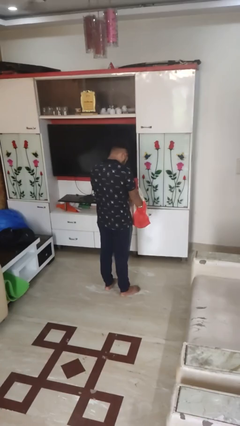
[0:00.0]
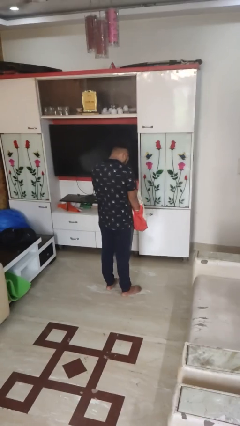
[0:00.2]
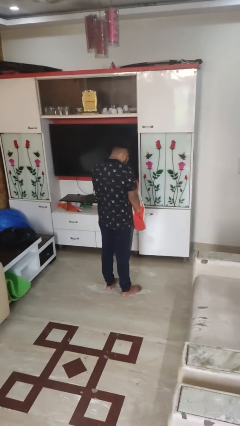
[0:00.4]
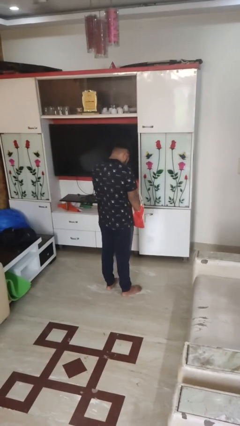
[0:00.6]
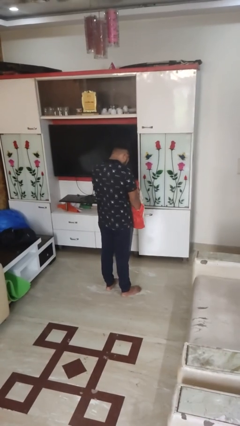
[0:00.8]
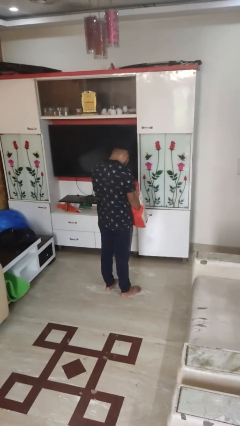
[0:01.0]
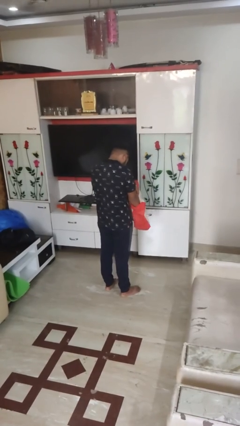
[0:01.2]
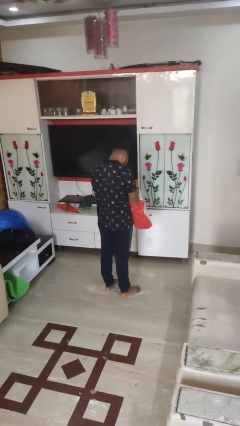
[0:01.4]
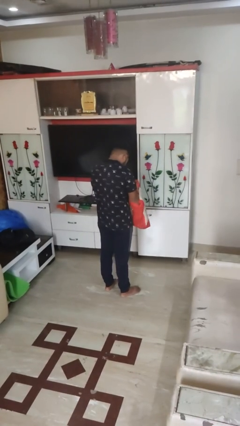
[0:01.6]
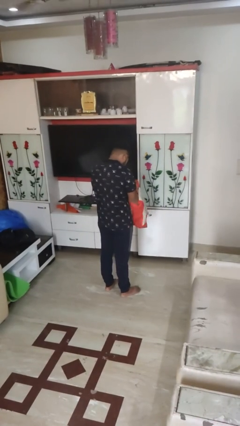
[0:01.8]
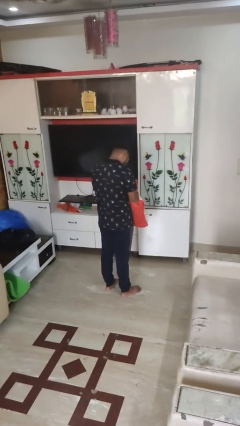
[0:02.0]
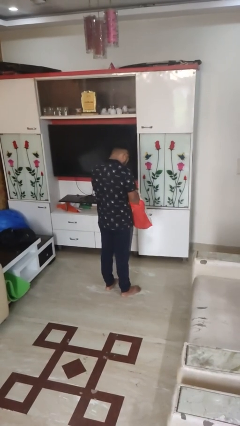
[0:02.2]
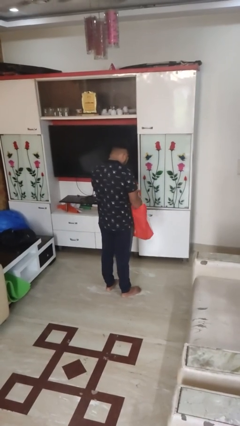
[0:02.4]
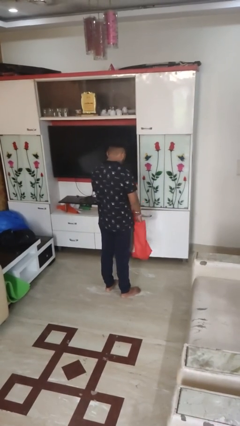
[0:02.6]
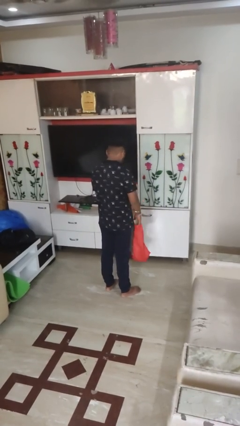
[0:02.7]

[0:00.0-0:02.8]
person searches in bag

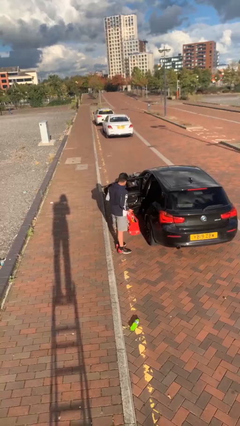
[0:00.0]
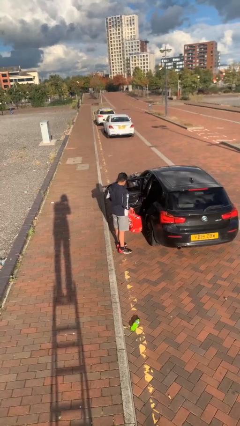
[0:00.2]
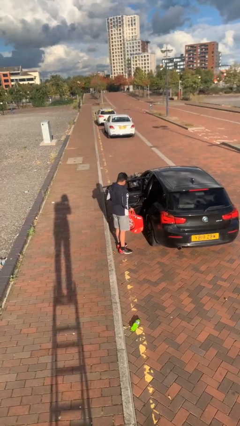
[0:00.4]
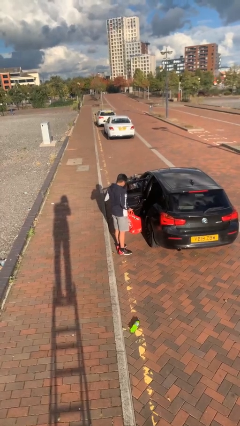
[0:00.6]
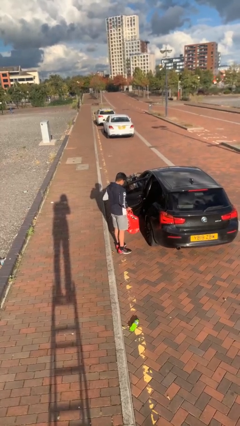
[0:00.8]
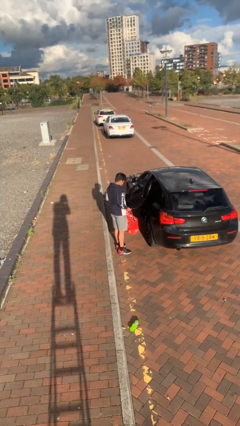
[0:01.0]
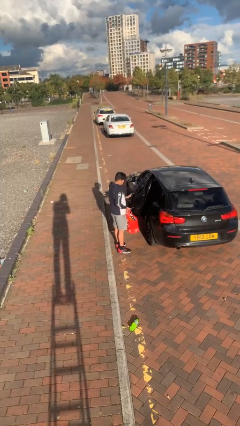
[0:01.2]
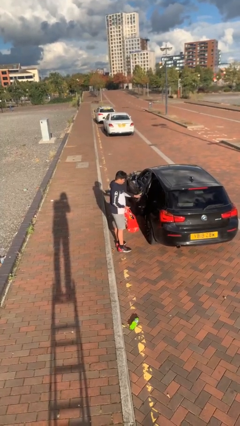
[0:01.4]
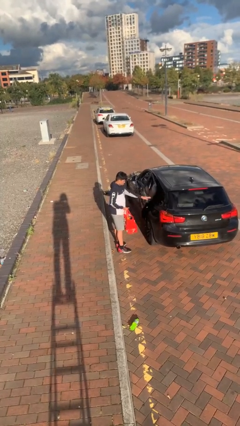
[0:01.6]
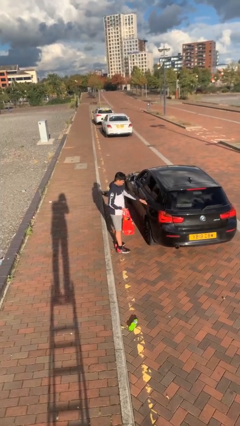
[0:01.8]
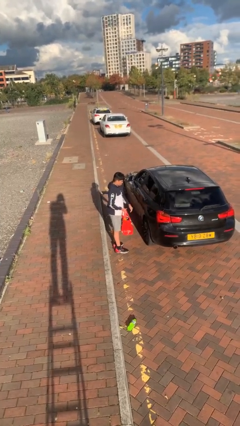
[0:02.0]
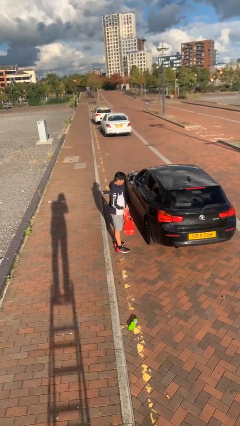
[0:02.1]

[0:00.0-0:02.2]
person closes car door

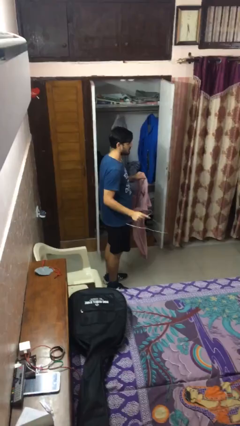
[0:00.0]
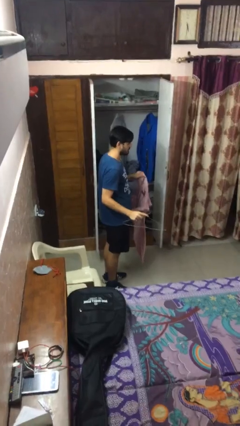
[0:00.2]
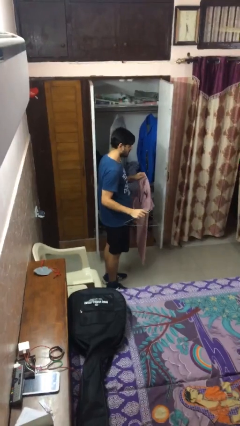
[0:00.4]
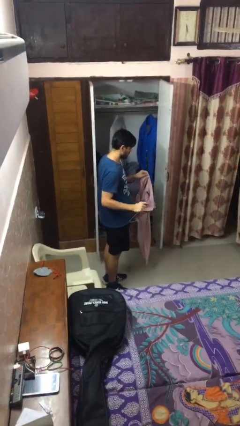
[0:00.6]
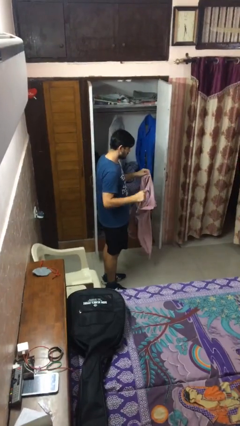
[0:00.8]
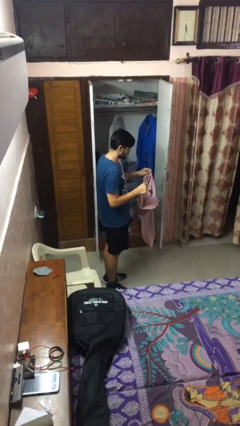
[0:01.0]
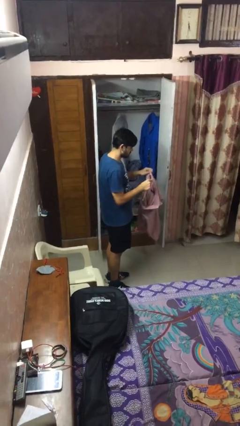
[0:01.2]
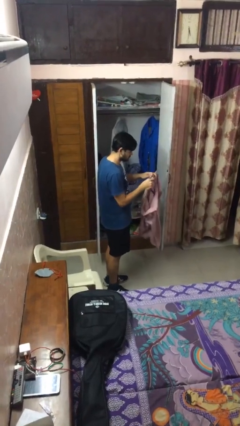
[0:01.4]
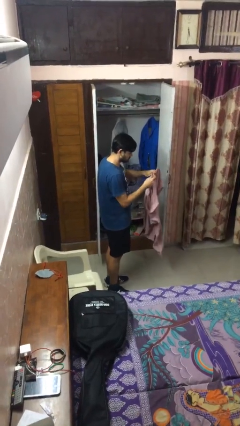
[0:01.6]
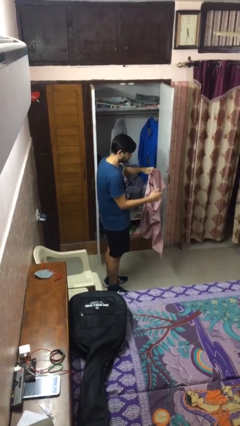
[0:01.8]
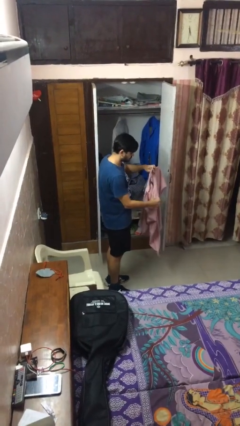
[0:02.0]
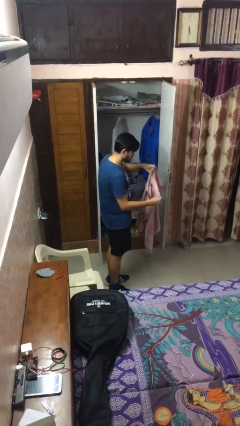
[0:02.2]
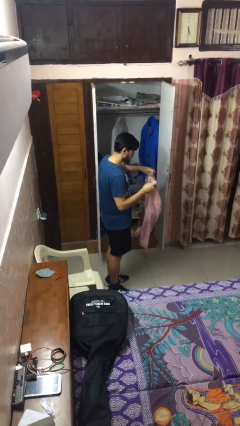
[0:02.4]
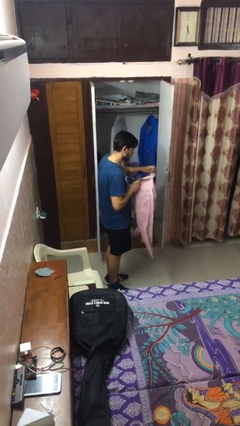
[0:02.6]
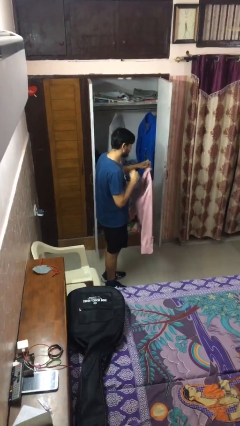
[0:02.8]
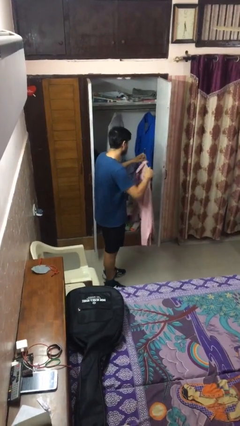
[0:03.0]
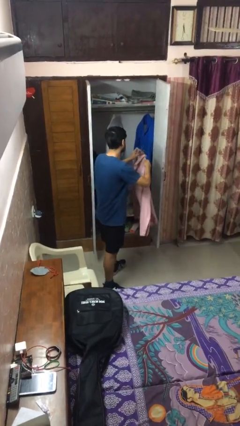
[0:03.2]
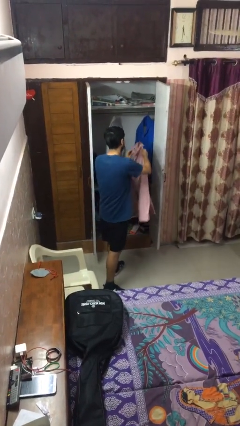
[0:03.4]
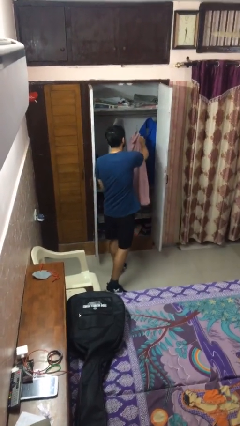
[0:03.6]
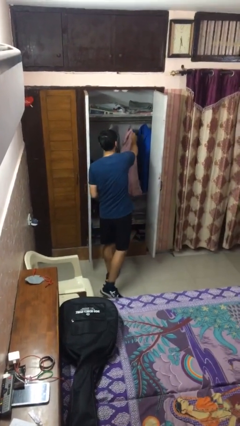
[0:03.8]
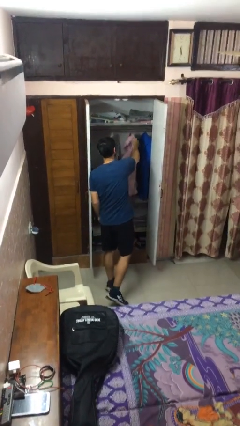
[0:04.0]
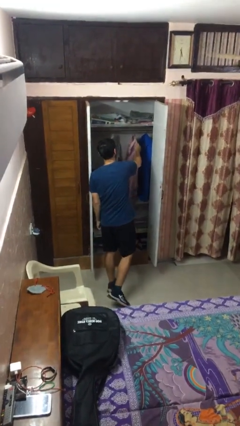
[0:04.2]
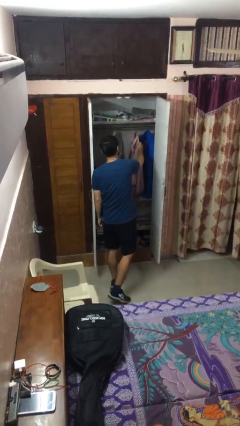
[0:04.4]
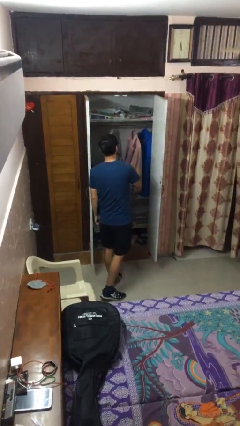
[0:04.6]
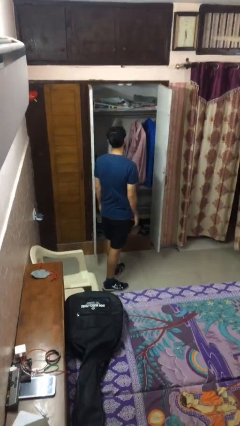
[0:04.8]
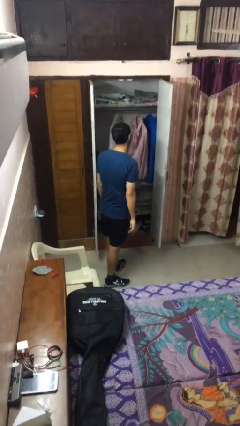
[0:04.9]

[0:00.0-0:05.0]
person puts clothes into closet

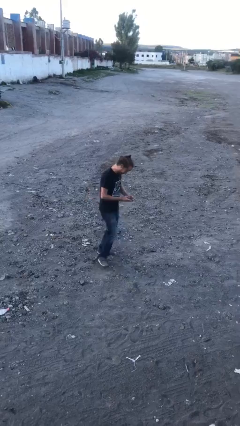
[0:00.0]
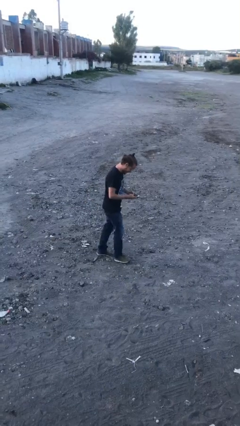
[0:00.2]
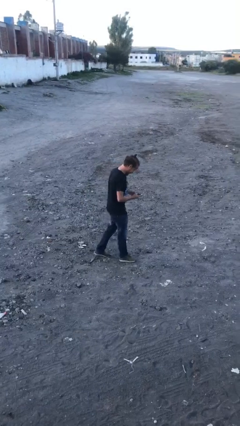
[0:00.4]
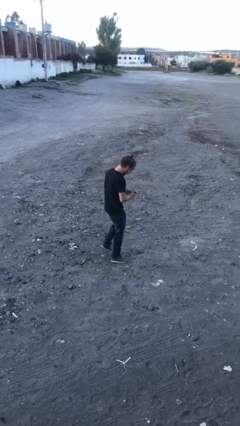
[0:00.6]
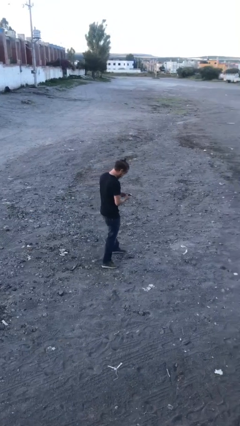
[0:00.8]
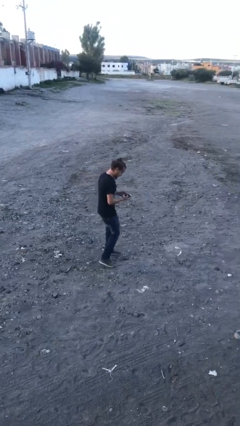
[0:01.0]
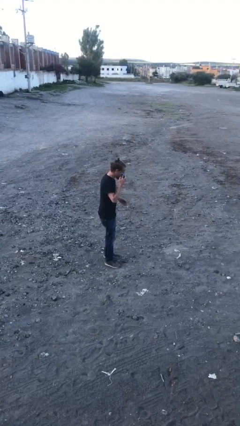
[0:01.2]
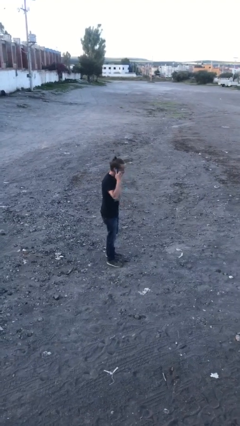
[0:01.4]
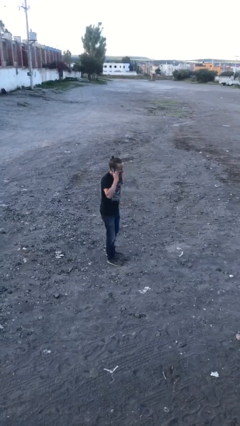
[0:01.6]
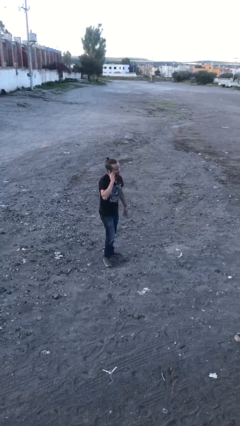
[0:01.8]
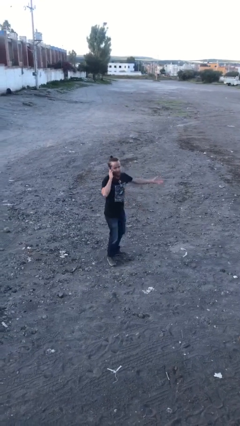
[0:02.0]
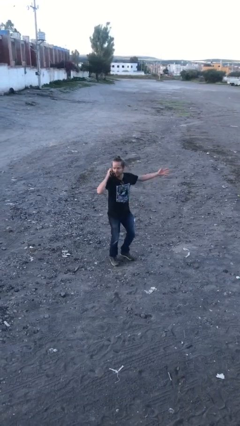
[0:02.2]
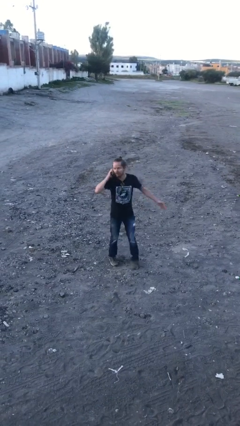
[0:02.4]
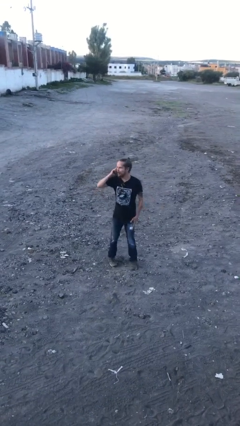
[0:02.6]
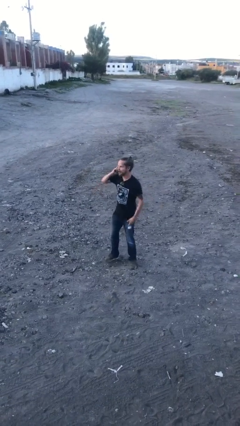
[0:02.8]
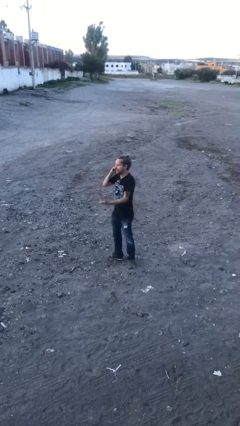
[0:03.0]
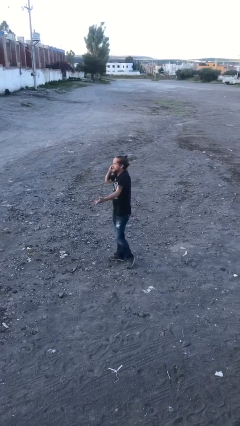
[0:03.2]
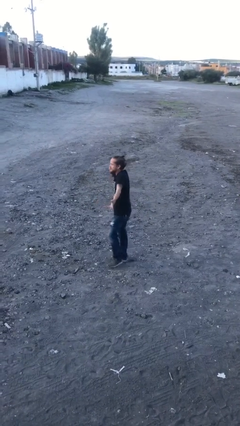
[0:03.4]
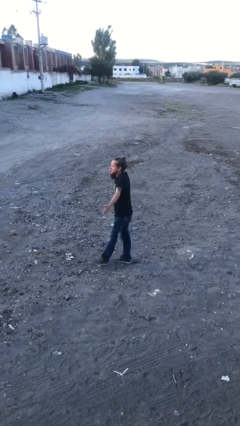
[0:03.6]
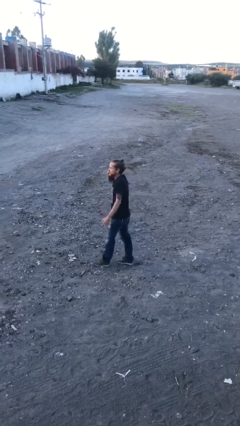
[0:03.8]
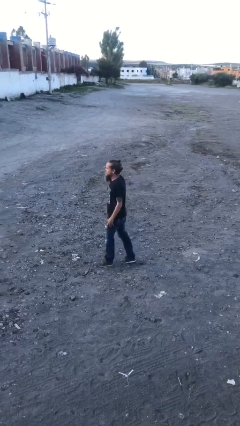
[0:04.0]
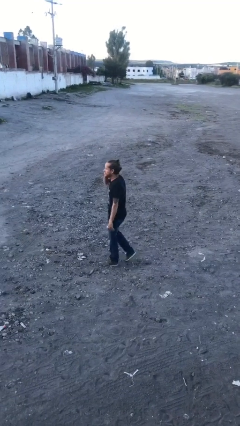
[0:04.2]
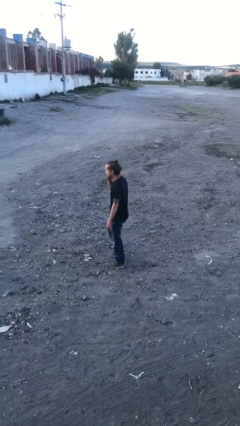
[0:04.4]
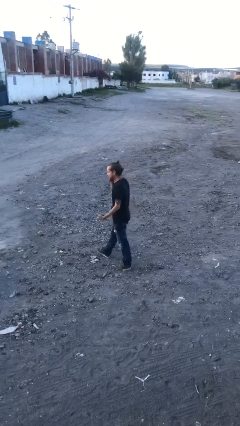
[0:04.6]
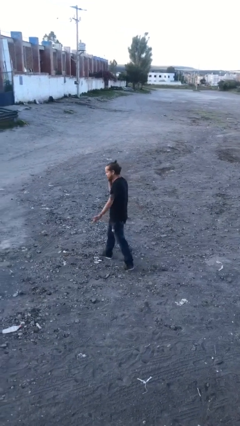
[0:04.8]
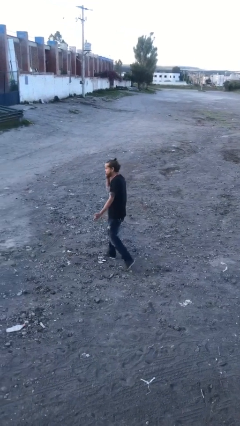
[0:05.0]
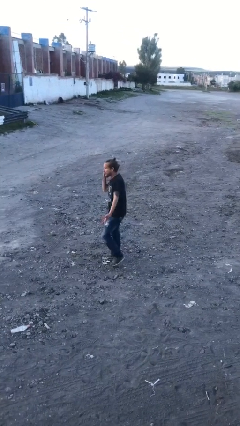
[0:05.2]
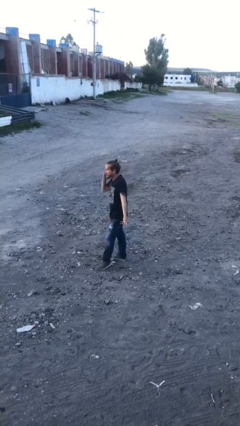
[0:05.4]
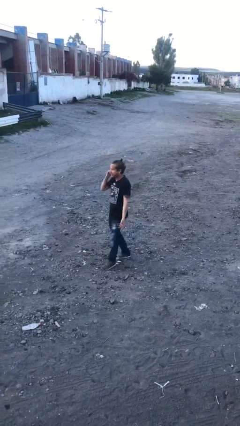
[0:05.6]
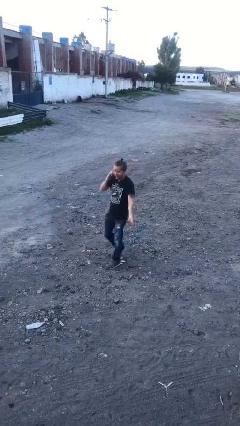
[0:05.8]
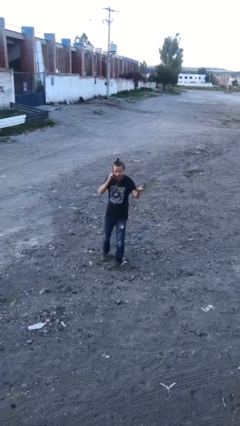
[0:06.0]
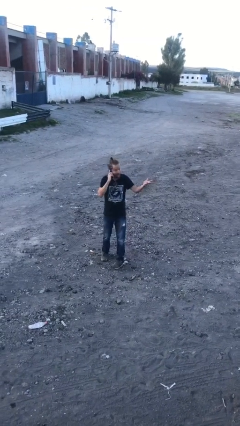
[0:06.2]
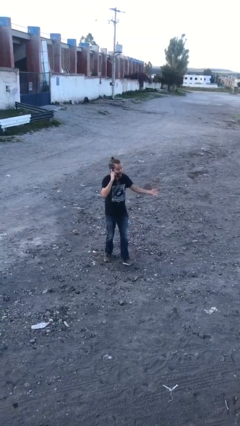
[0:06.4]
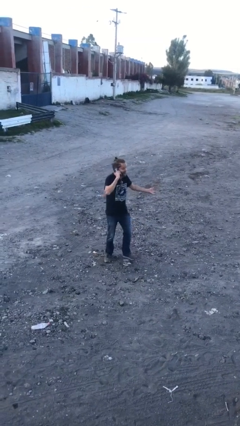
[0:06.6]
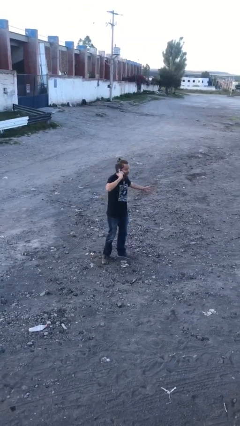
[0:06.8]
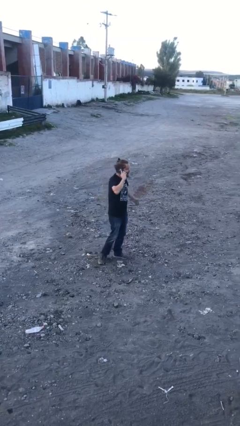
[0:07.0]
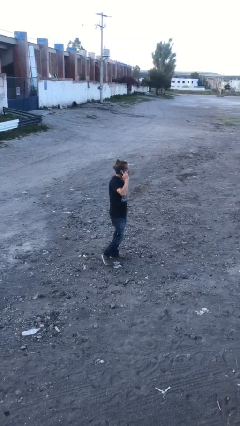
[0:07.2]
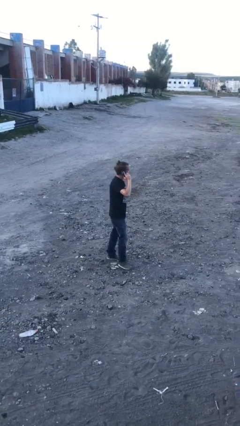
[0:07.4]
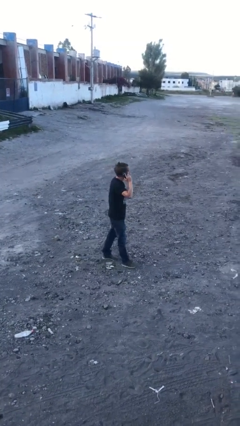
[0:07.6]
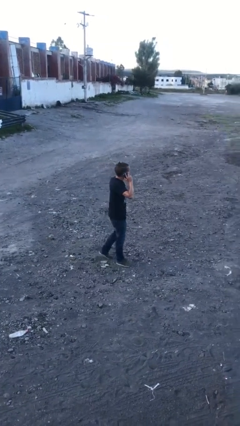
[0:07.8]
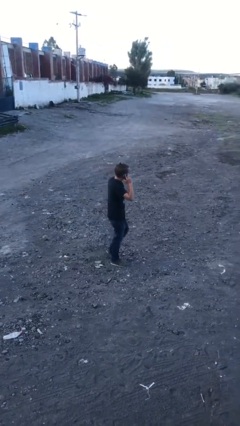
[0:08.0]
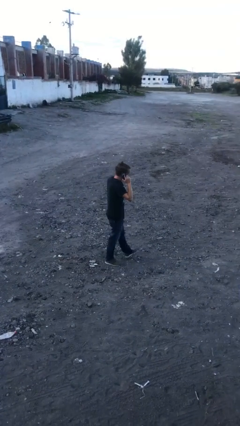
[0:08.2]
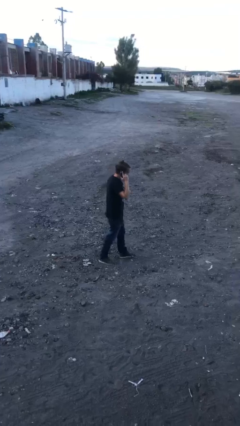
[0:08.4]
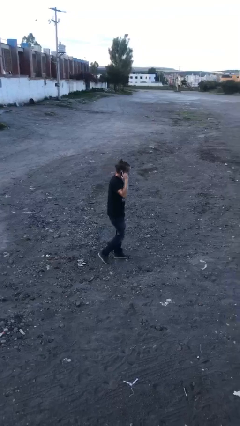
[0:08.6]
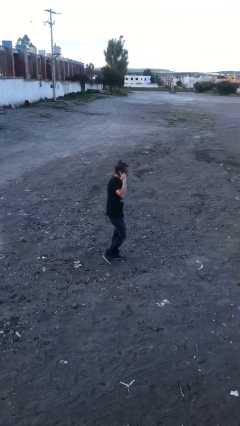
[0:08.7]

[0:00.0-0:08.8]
person talks on phone
